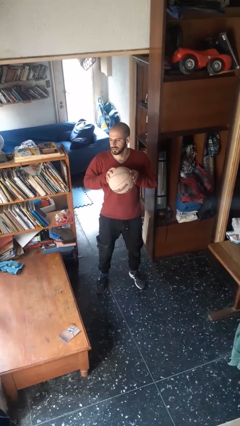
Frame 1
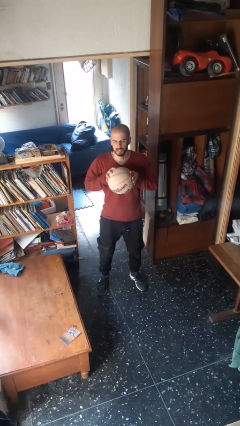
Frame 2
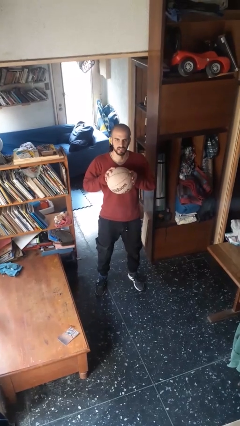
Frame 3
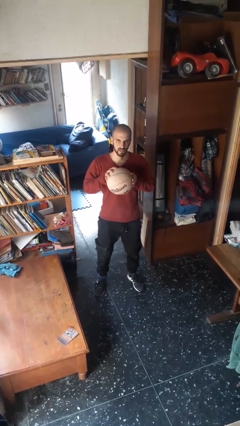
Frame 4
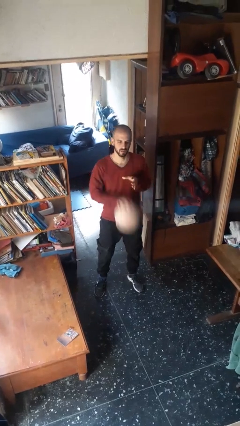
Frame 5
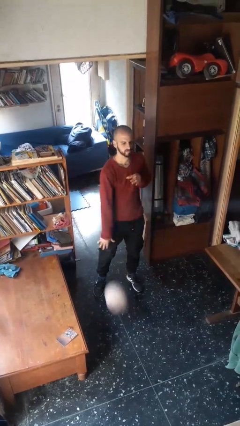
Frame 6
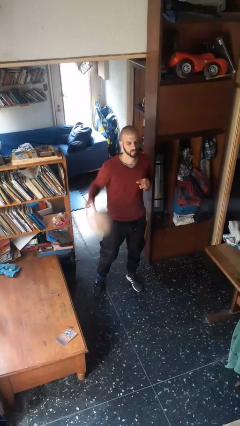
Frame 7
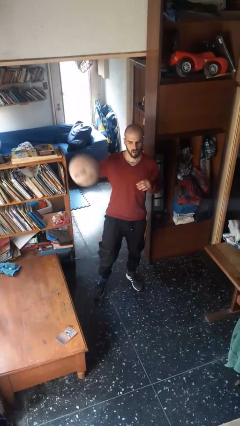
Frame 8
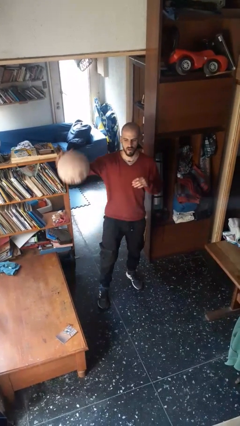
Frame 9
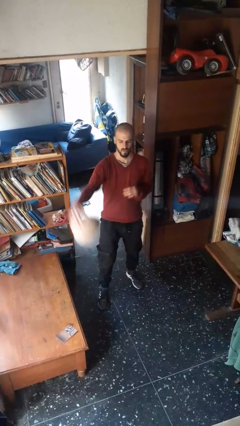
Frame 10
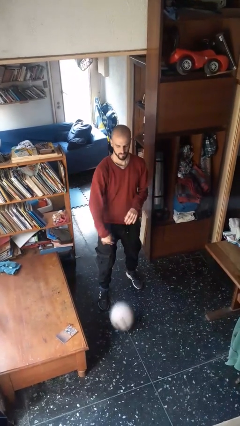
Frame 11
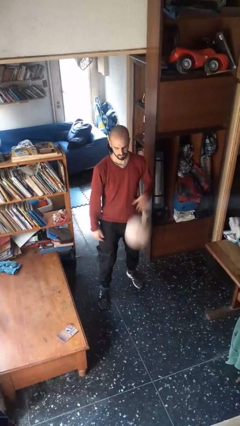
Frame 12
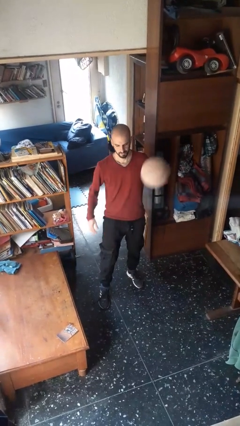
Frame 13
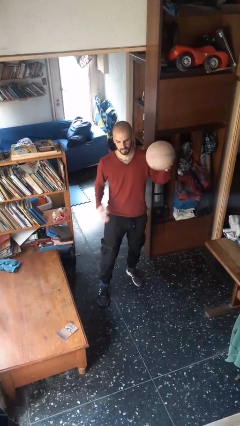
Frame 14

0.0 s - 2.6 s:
person bounces ball on floor

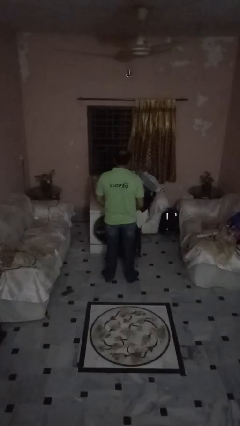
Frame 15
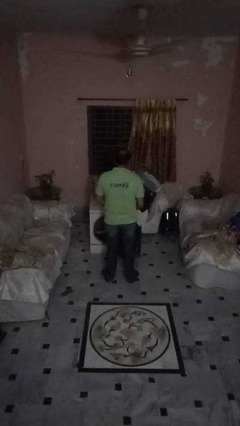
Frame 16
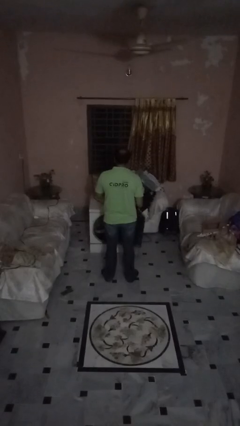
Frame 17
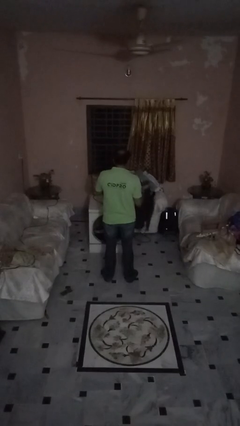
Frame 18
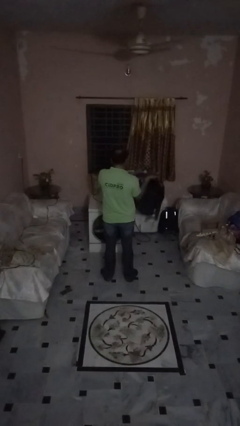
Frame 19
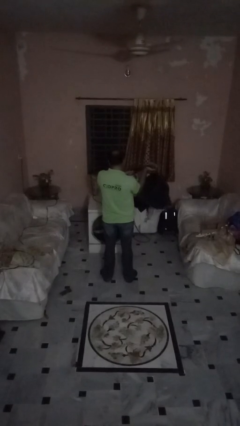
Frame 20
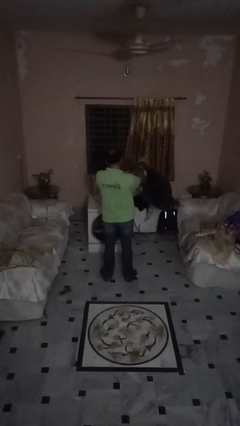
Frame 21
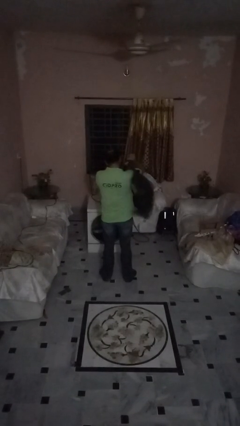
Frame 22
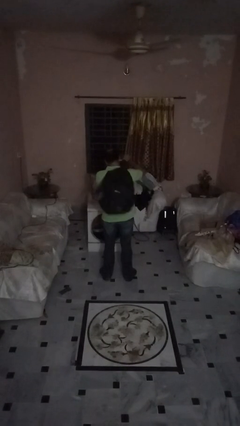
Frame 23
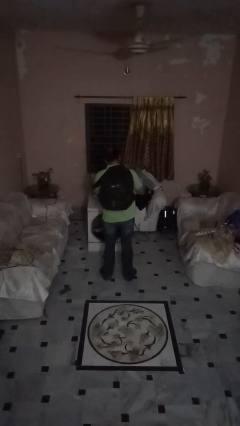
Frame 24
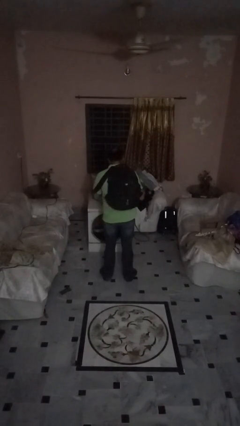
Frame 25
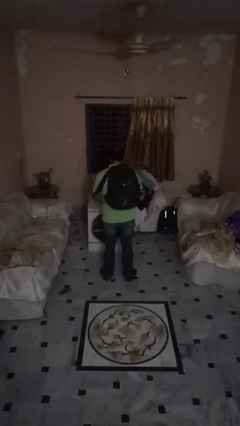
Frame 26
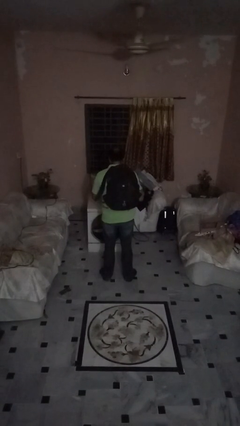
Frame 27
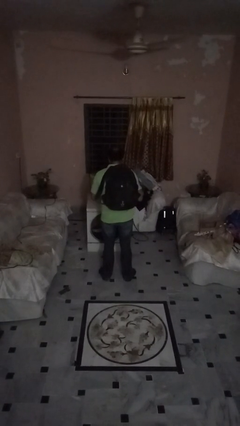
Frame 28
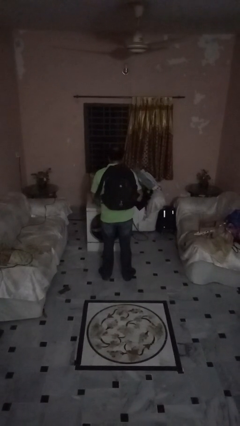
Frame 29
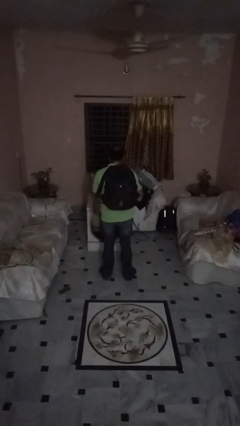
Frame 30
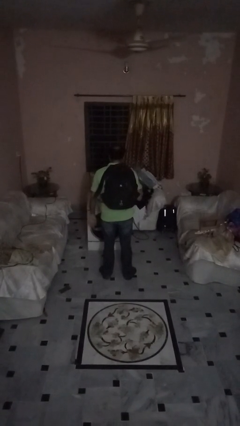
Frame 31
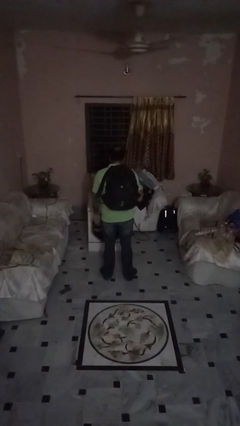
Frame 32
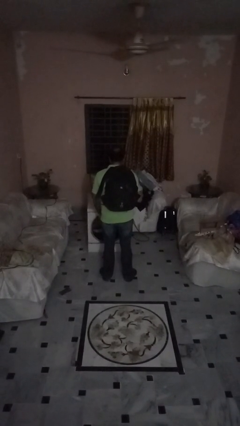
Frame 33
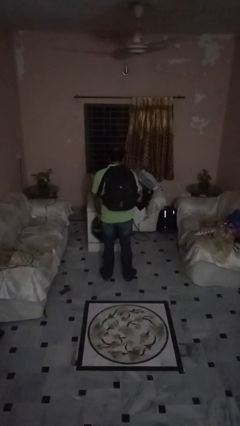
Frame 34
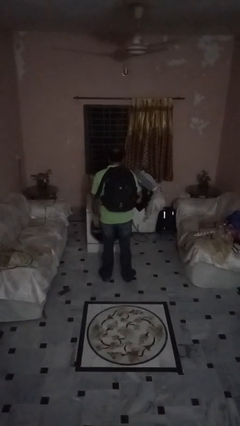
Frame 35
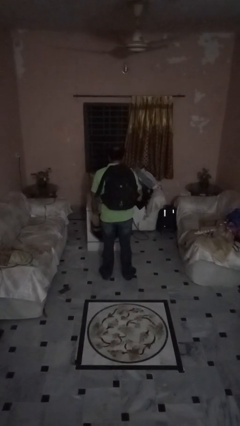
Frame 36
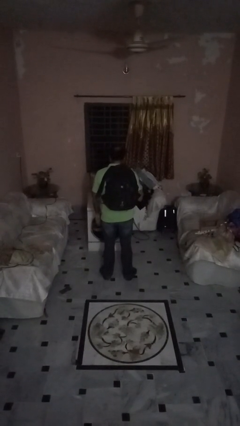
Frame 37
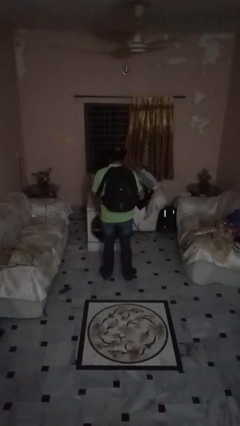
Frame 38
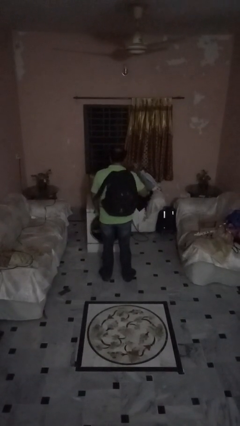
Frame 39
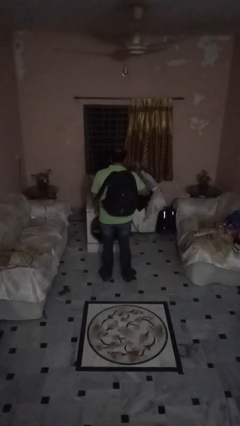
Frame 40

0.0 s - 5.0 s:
person puts on backpack

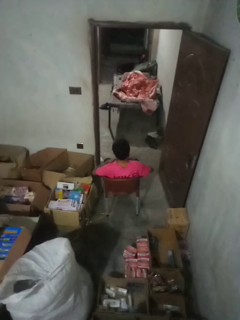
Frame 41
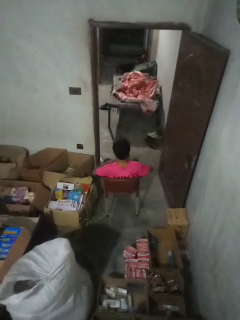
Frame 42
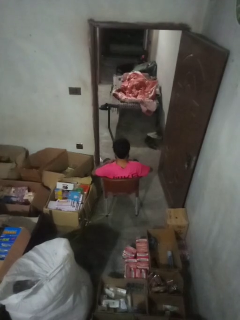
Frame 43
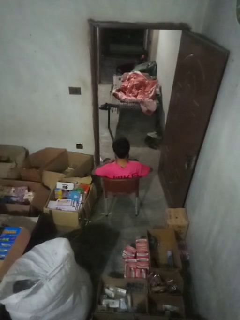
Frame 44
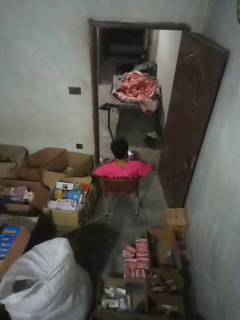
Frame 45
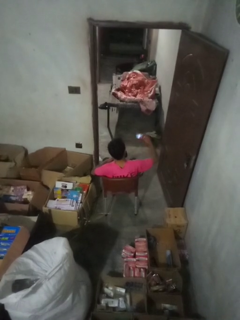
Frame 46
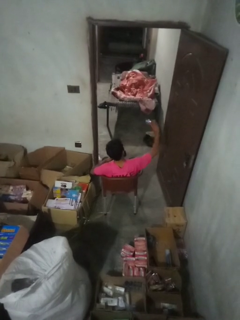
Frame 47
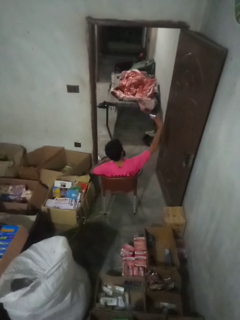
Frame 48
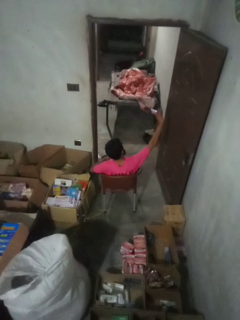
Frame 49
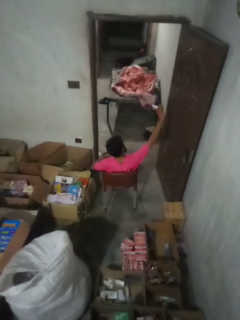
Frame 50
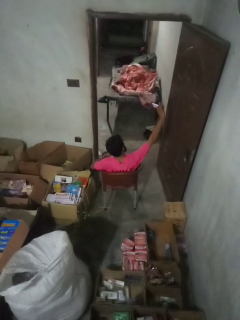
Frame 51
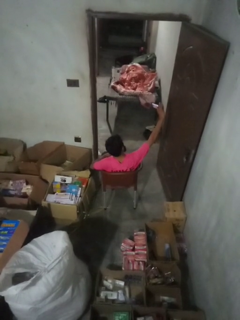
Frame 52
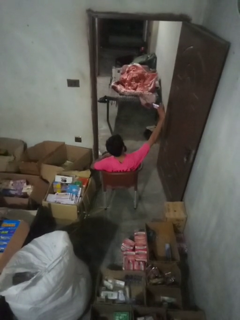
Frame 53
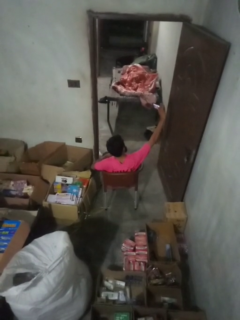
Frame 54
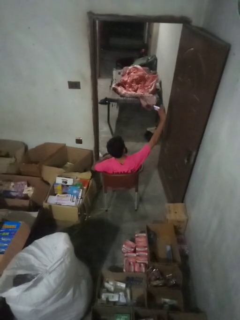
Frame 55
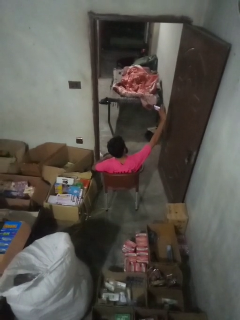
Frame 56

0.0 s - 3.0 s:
person takes selfie

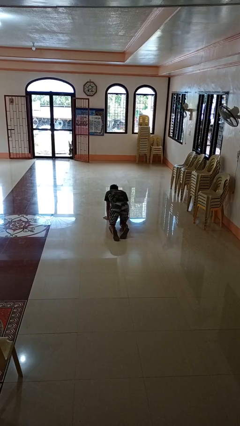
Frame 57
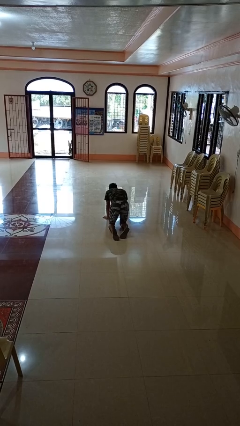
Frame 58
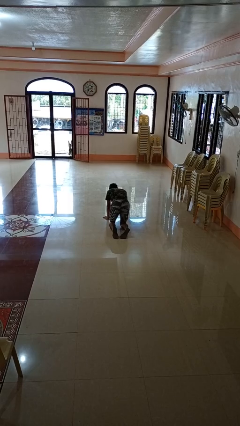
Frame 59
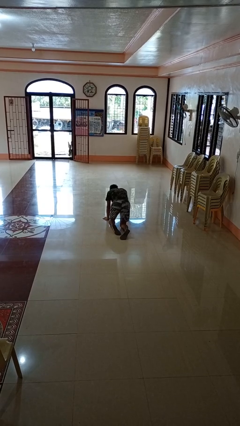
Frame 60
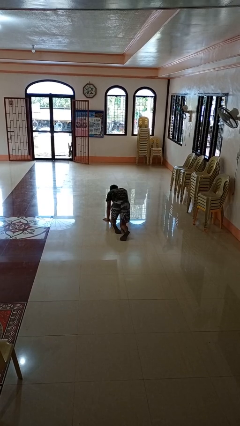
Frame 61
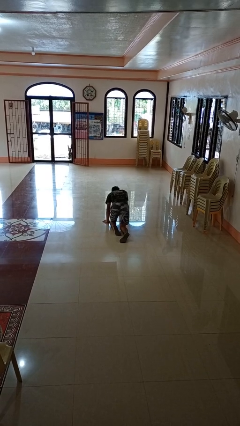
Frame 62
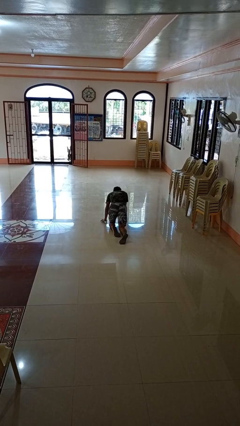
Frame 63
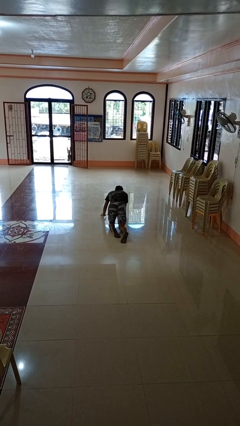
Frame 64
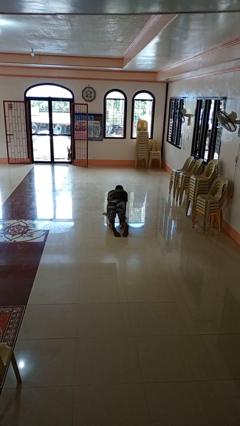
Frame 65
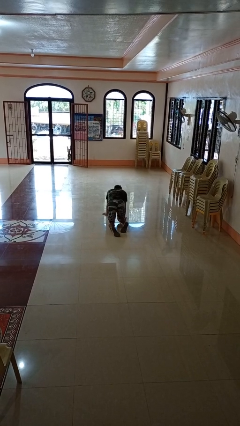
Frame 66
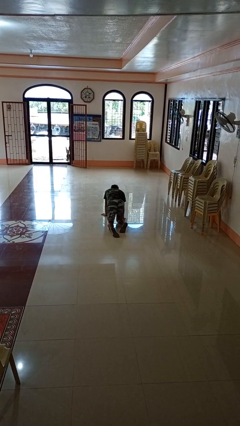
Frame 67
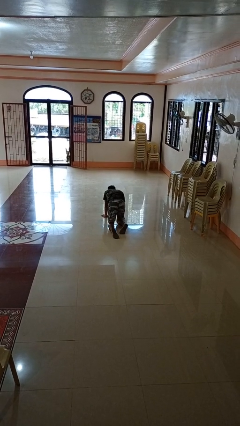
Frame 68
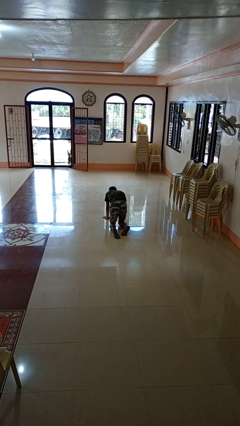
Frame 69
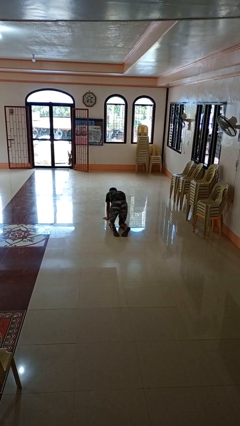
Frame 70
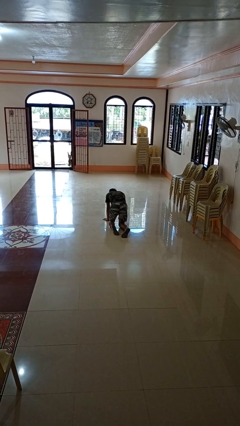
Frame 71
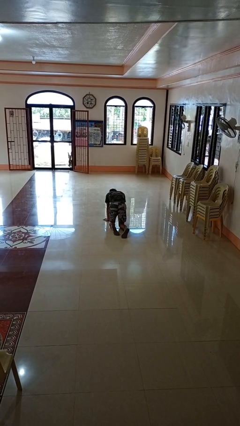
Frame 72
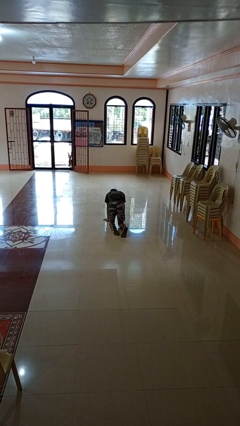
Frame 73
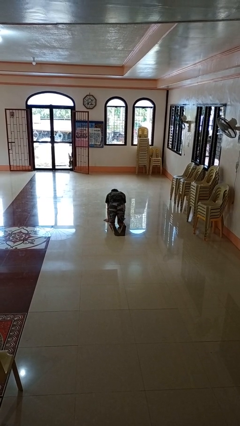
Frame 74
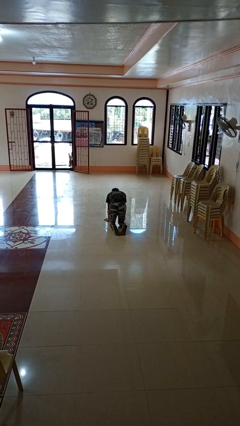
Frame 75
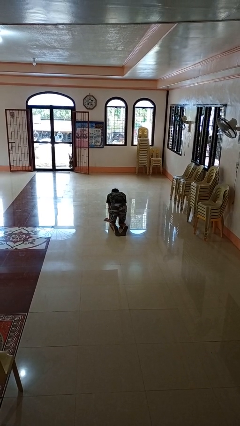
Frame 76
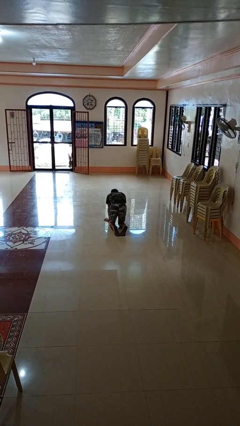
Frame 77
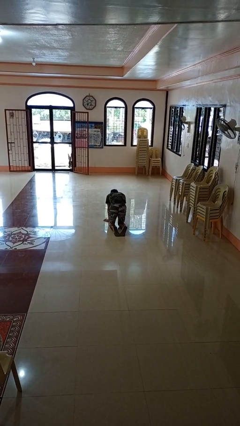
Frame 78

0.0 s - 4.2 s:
person crawls

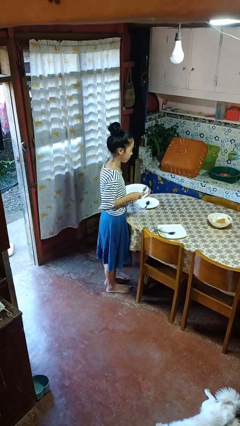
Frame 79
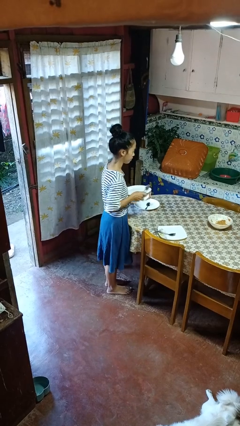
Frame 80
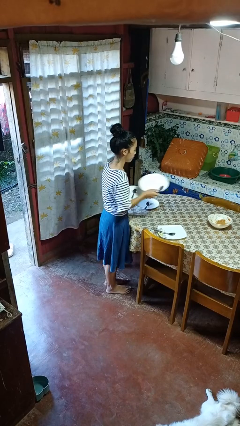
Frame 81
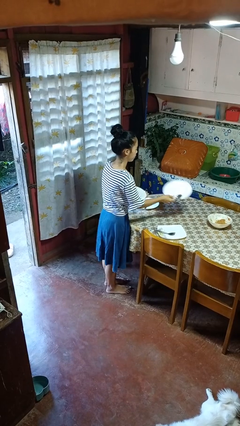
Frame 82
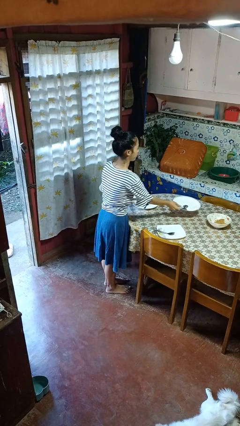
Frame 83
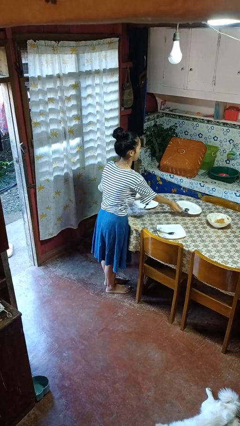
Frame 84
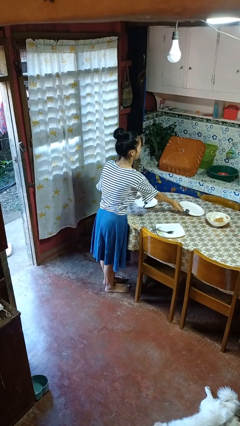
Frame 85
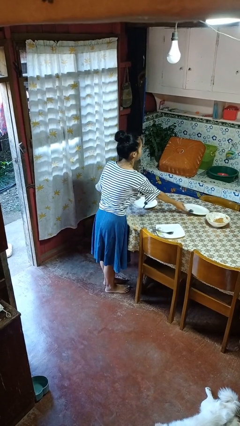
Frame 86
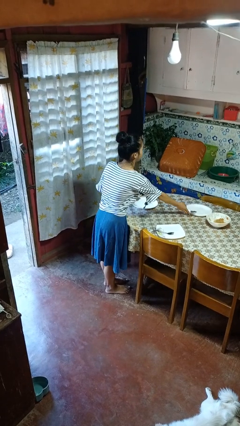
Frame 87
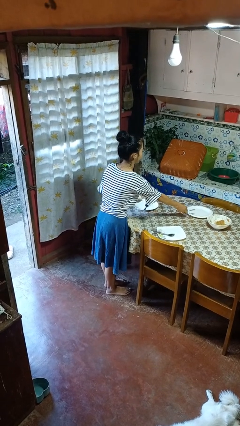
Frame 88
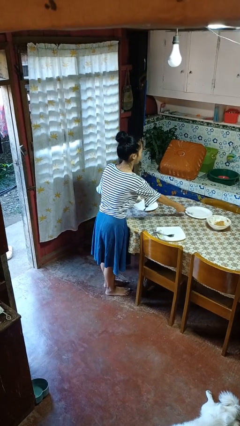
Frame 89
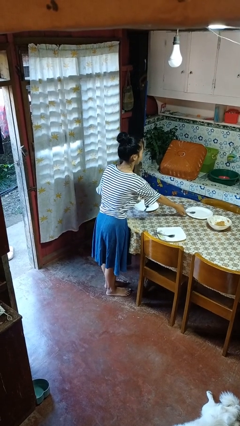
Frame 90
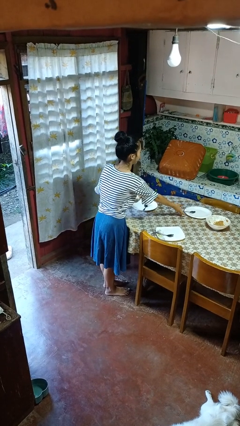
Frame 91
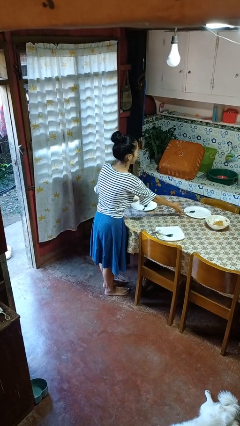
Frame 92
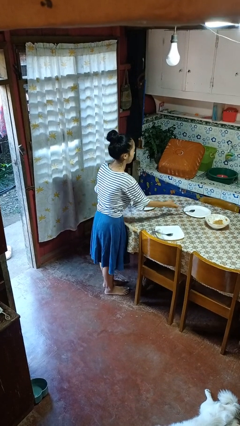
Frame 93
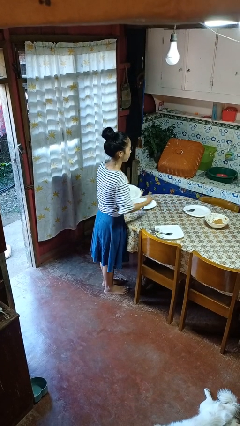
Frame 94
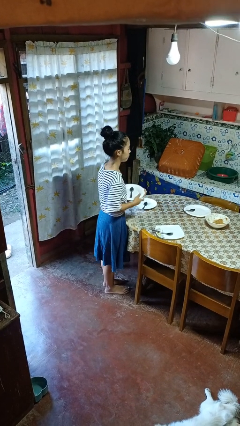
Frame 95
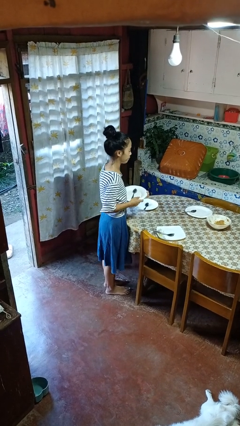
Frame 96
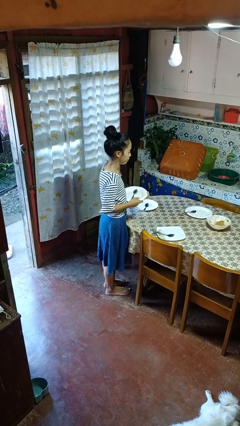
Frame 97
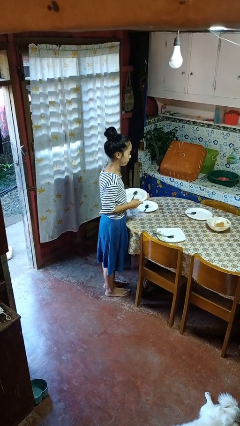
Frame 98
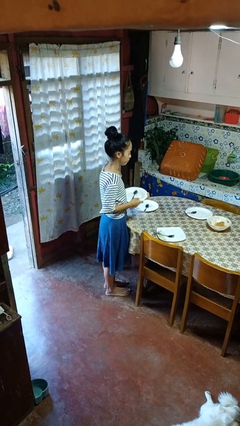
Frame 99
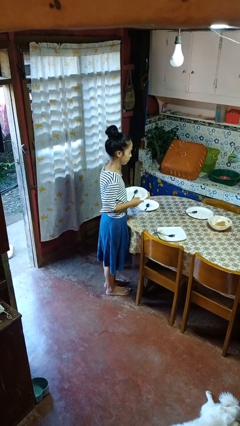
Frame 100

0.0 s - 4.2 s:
person sets table
